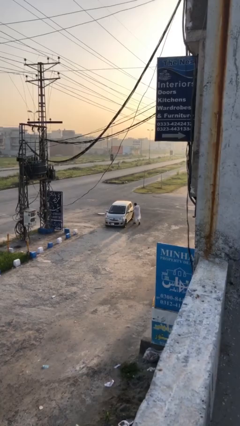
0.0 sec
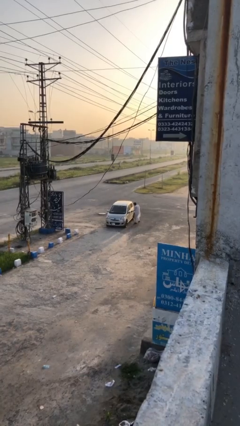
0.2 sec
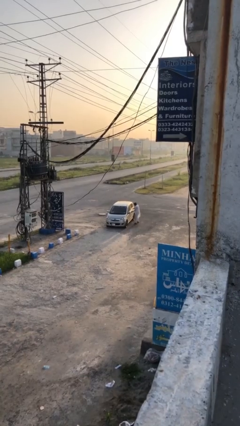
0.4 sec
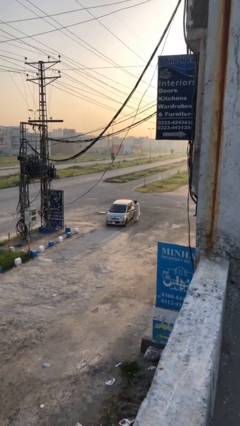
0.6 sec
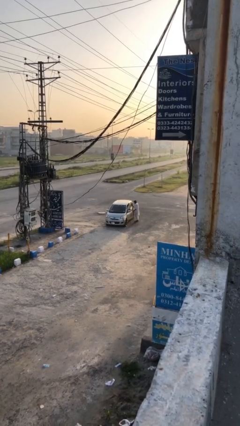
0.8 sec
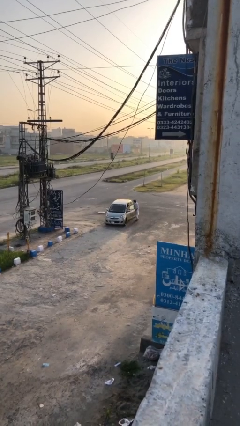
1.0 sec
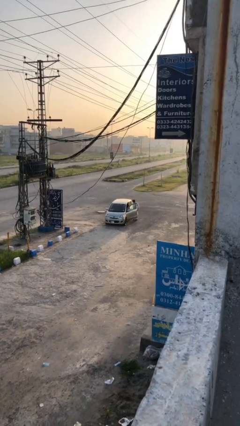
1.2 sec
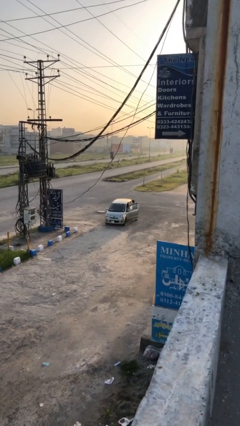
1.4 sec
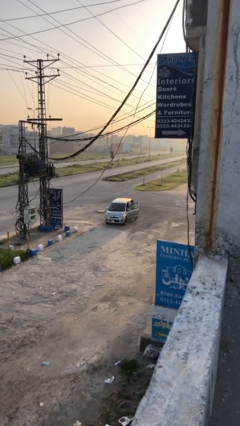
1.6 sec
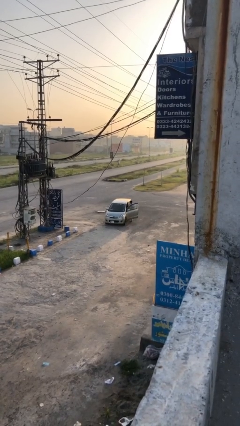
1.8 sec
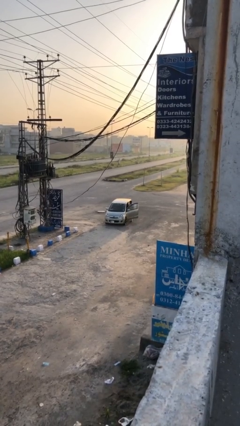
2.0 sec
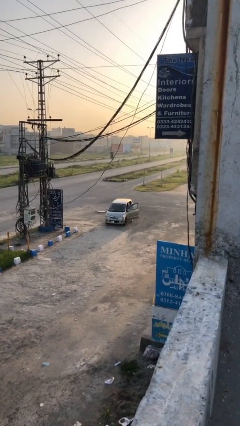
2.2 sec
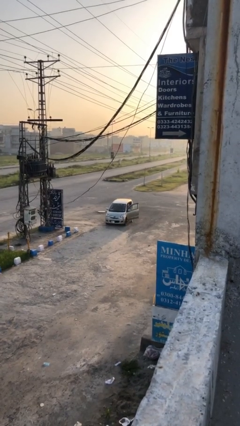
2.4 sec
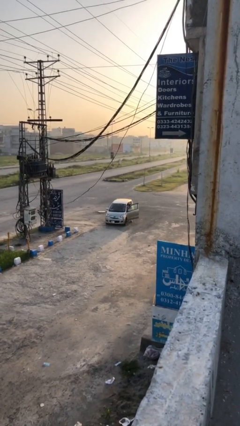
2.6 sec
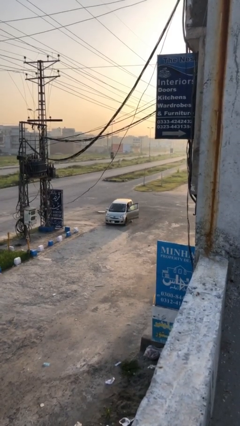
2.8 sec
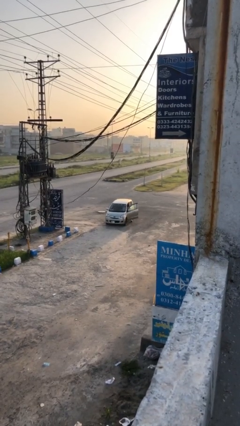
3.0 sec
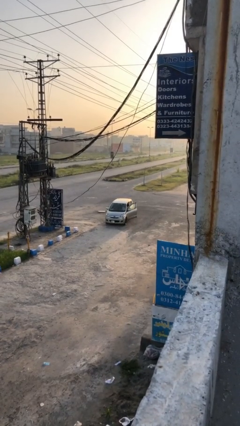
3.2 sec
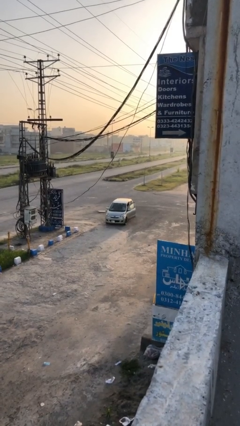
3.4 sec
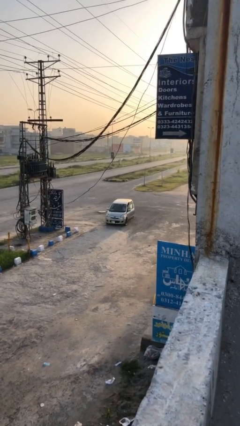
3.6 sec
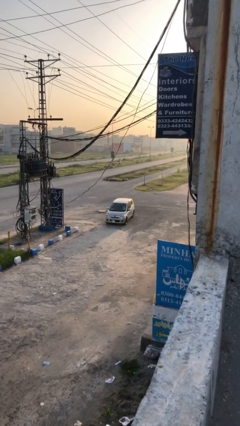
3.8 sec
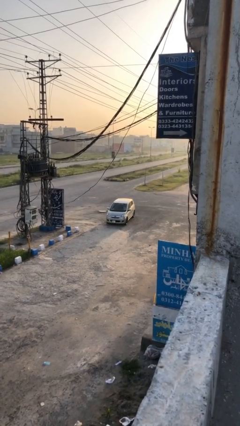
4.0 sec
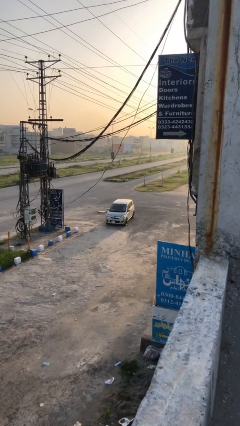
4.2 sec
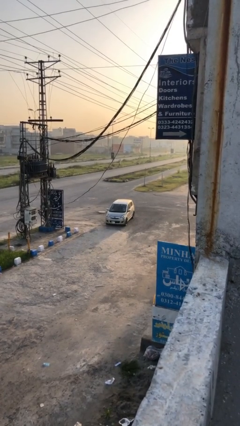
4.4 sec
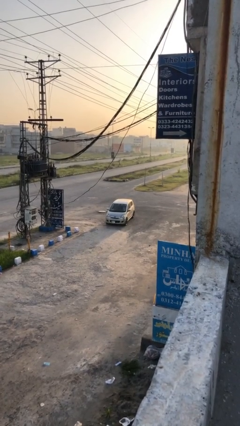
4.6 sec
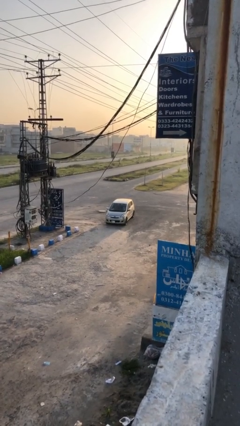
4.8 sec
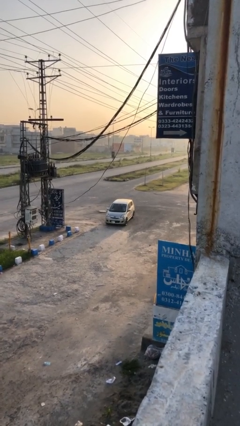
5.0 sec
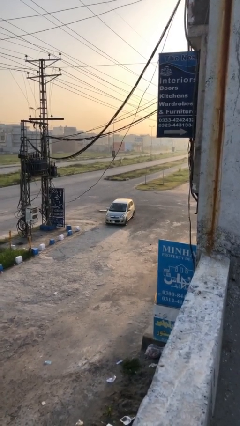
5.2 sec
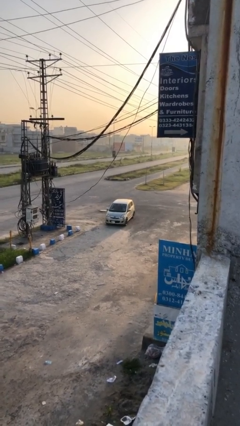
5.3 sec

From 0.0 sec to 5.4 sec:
car picks up person

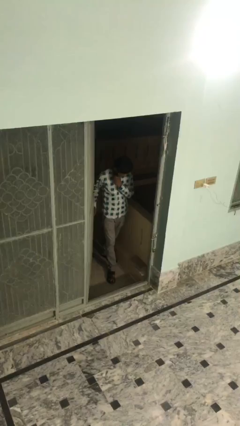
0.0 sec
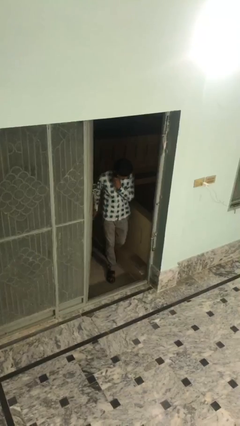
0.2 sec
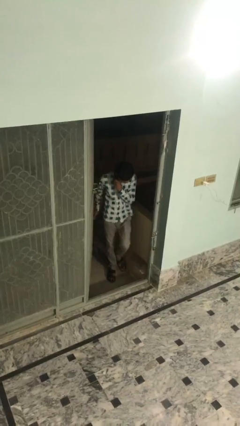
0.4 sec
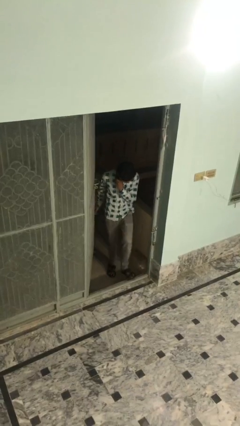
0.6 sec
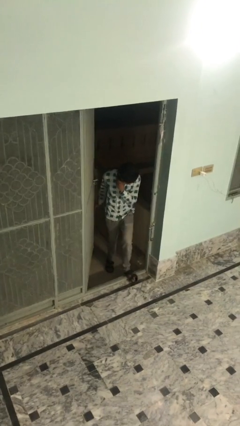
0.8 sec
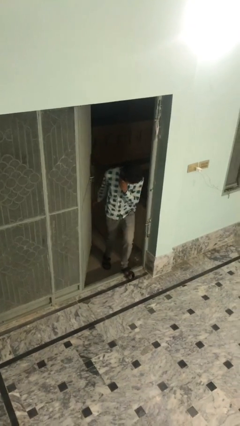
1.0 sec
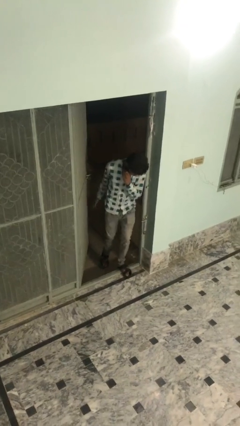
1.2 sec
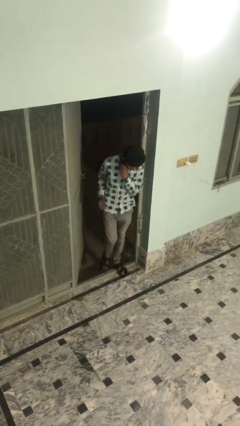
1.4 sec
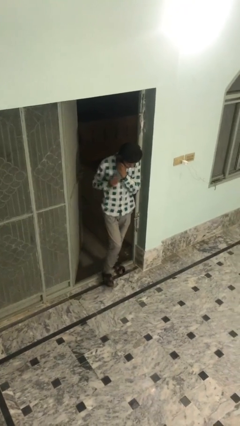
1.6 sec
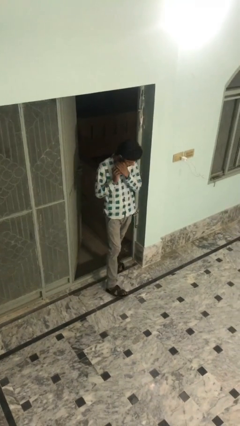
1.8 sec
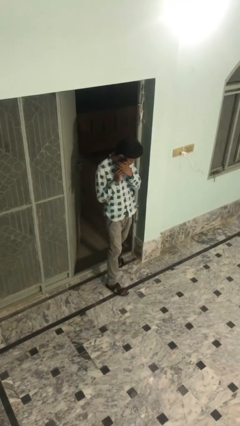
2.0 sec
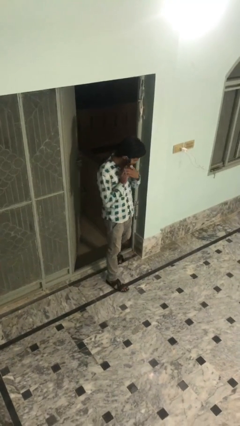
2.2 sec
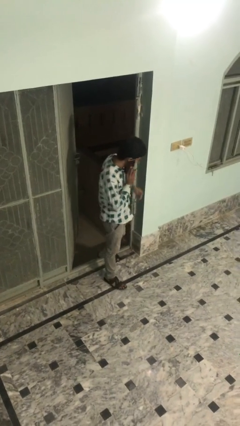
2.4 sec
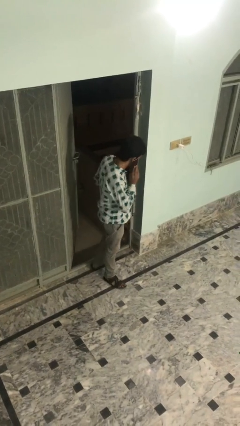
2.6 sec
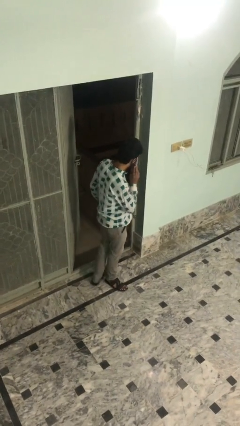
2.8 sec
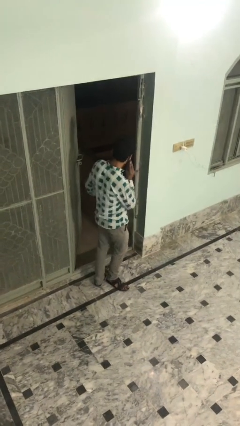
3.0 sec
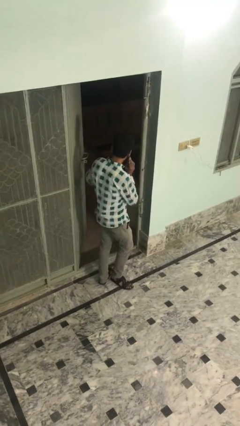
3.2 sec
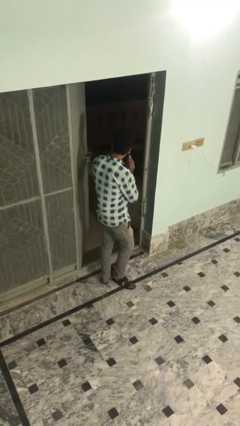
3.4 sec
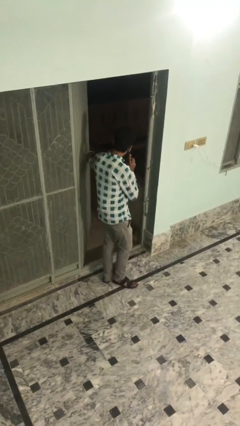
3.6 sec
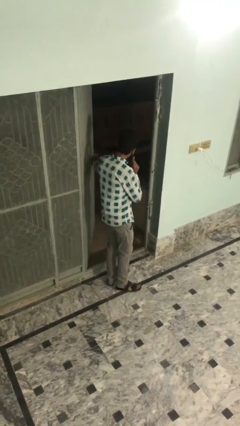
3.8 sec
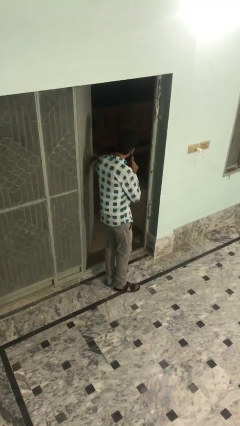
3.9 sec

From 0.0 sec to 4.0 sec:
person enters scene through structure

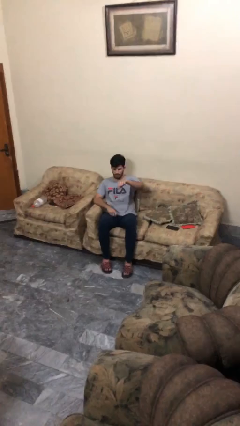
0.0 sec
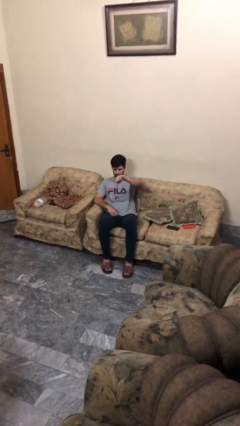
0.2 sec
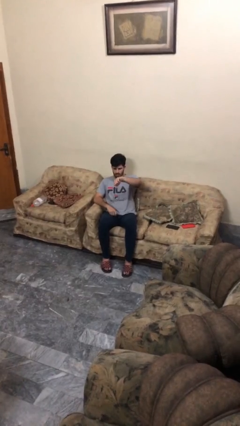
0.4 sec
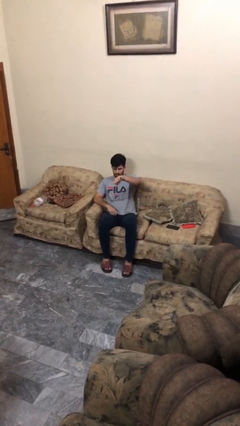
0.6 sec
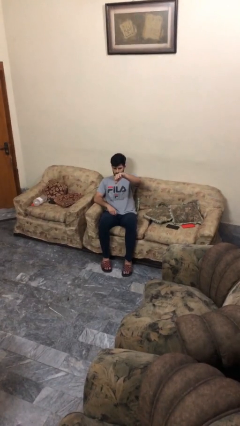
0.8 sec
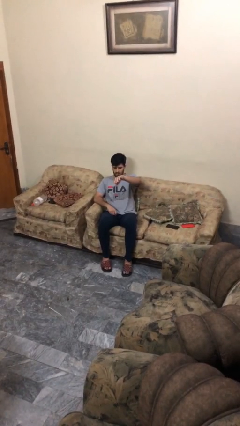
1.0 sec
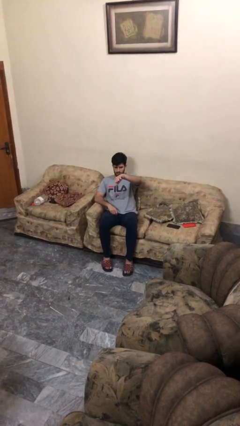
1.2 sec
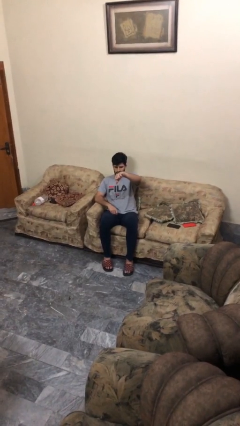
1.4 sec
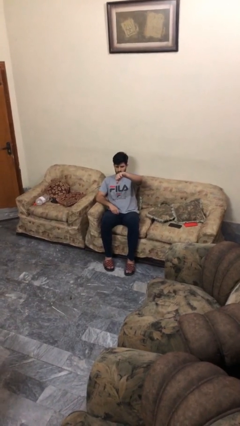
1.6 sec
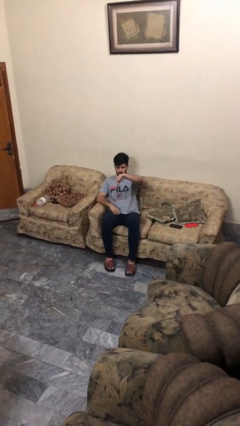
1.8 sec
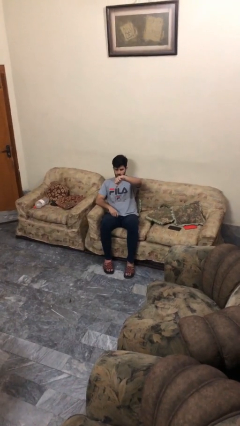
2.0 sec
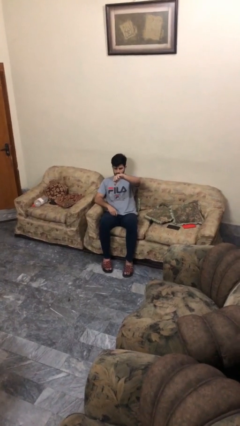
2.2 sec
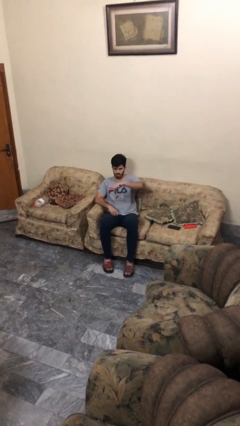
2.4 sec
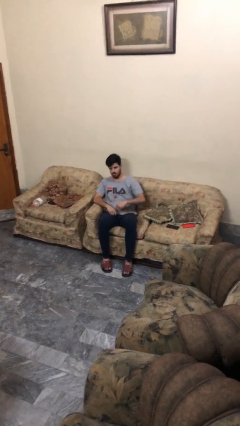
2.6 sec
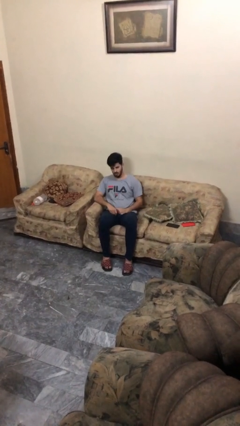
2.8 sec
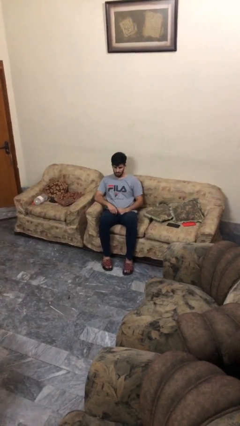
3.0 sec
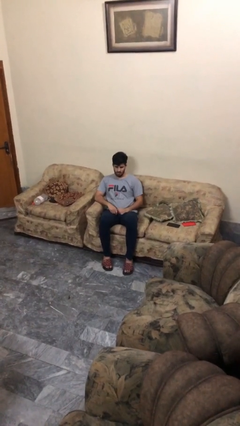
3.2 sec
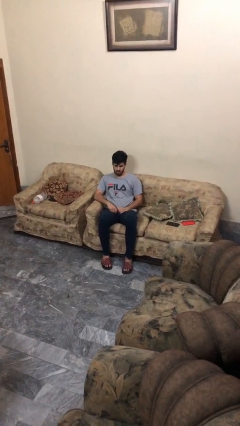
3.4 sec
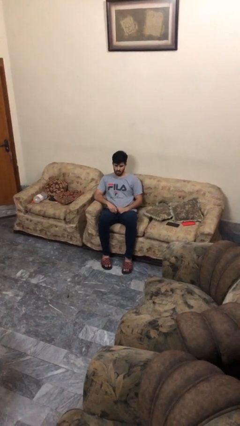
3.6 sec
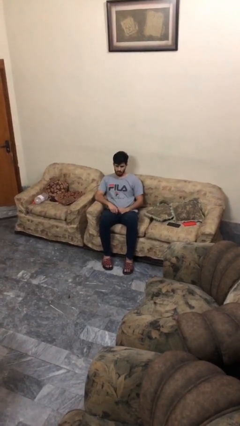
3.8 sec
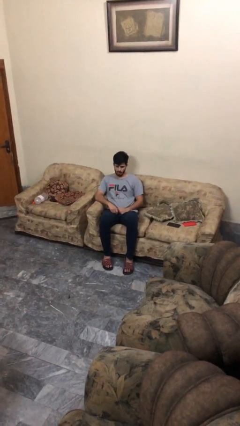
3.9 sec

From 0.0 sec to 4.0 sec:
person gestures thumbs down

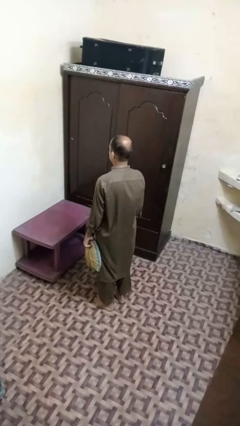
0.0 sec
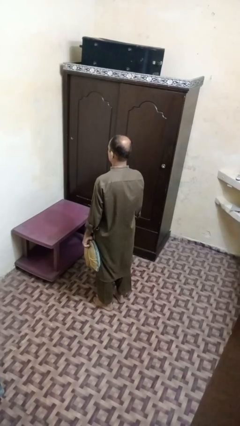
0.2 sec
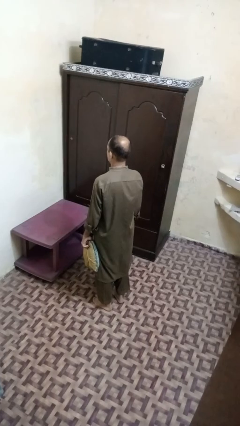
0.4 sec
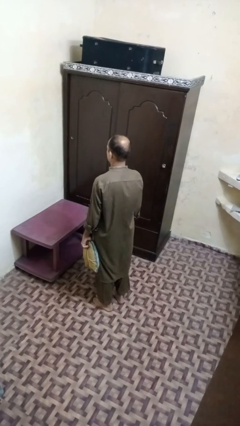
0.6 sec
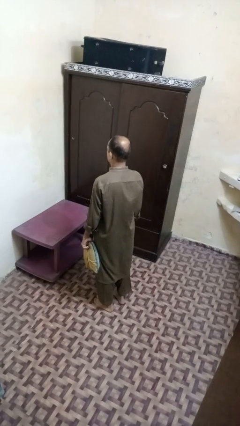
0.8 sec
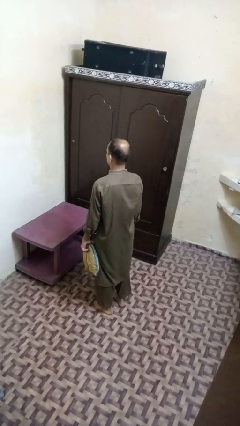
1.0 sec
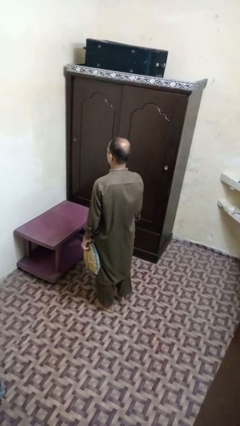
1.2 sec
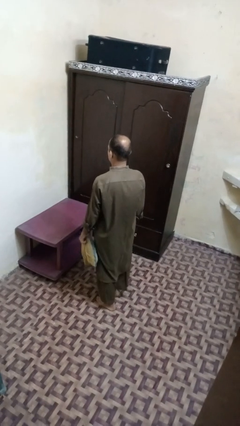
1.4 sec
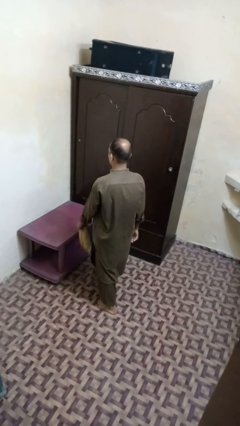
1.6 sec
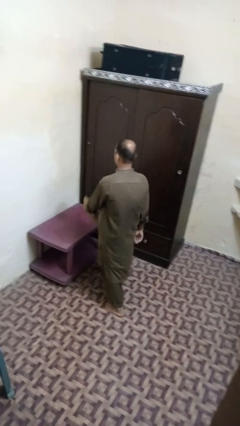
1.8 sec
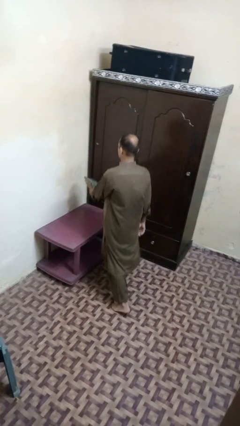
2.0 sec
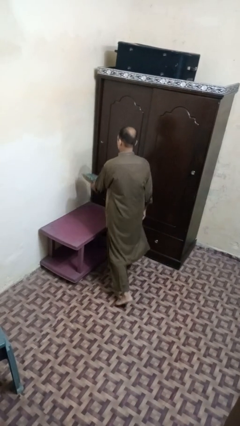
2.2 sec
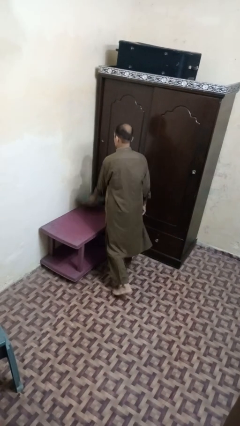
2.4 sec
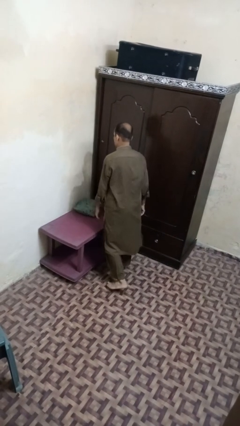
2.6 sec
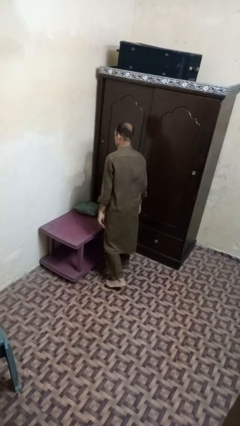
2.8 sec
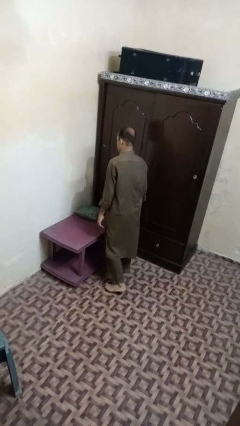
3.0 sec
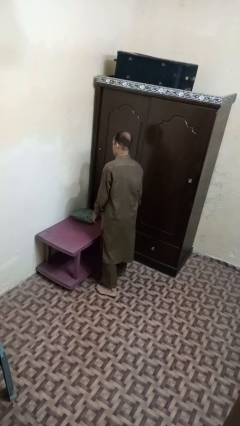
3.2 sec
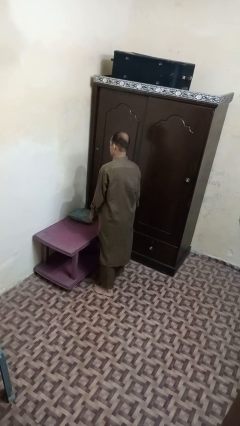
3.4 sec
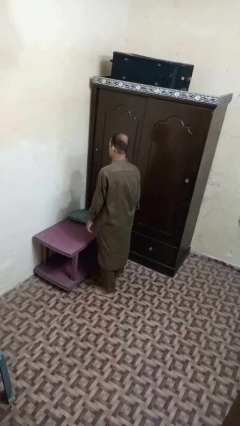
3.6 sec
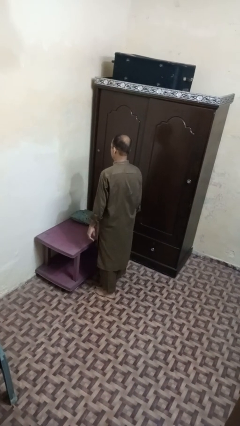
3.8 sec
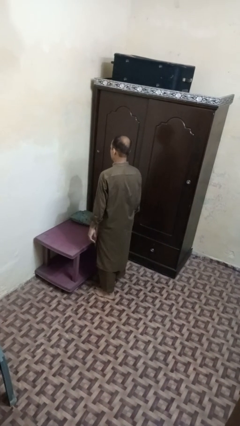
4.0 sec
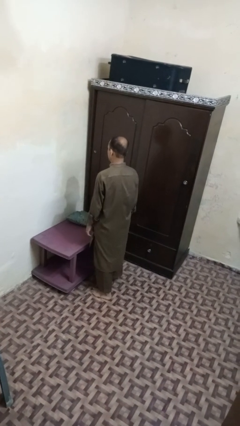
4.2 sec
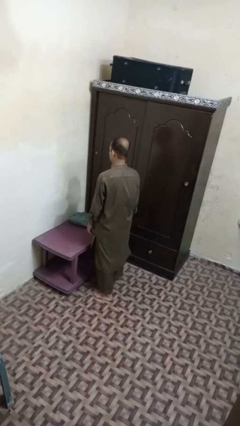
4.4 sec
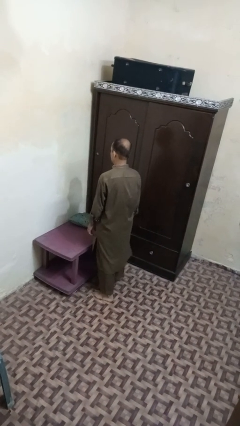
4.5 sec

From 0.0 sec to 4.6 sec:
person throws object on table
